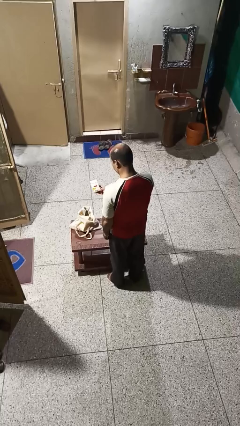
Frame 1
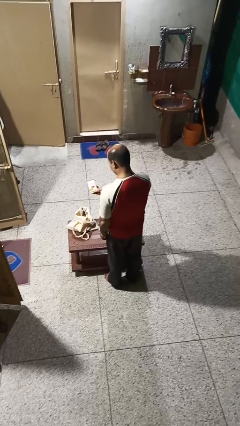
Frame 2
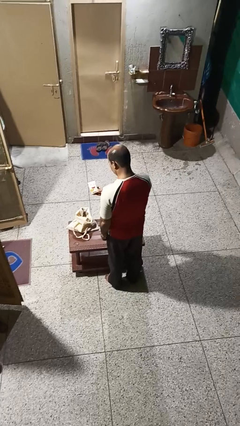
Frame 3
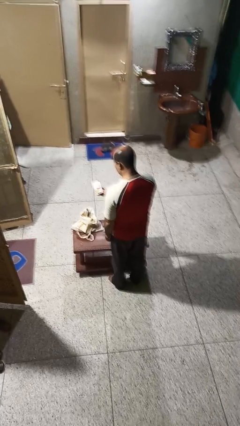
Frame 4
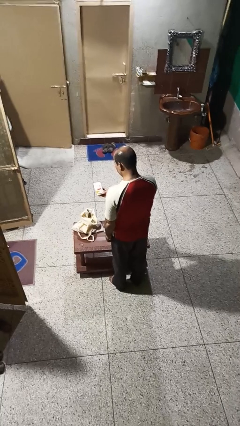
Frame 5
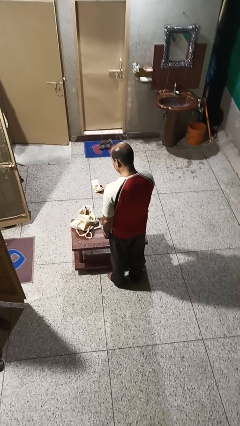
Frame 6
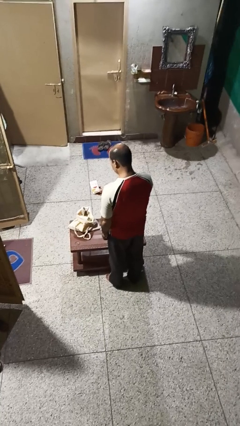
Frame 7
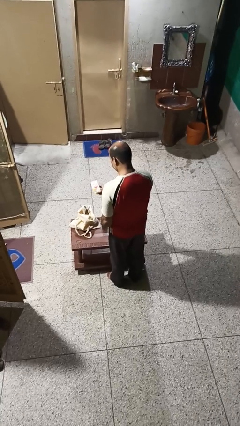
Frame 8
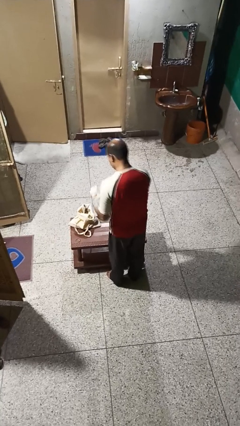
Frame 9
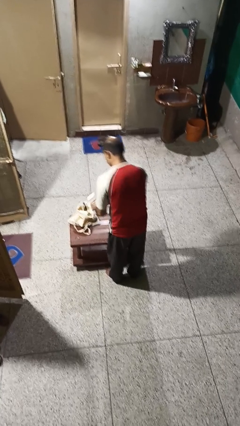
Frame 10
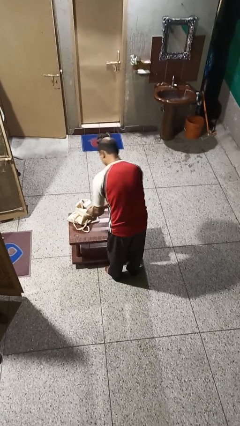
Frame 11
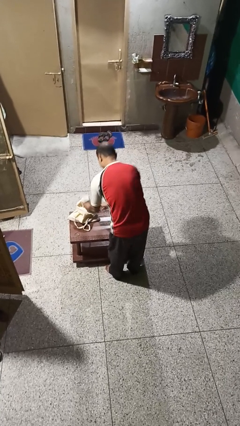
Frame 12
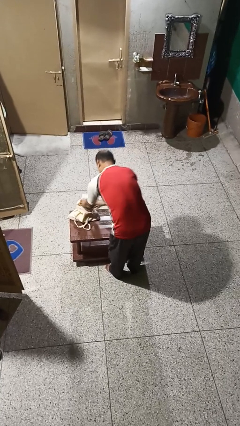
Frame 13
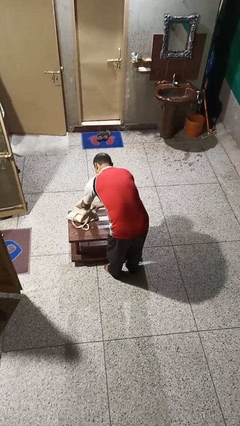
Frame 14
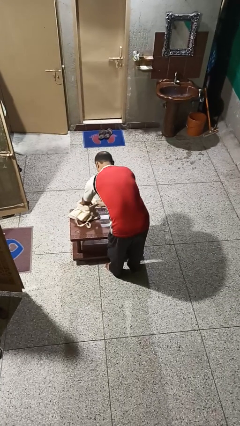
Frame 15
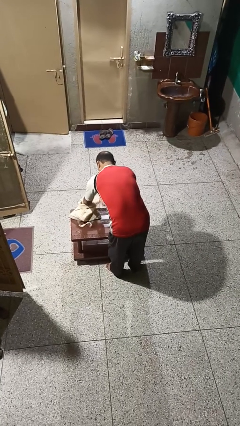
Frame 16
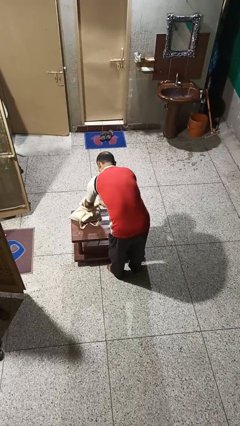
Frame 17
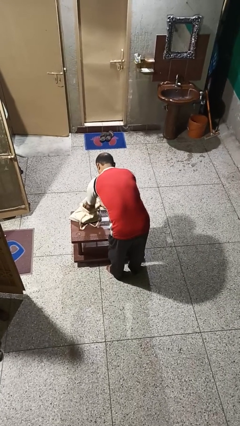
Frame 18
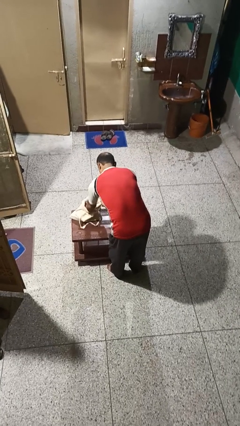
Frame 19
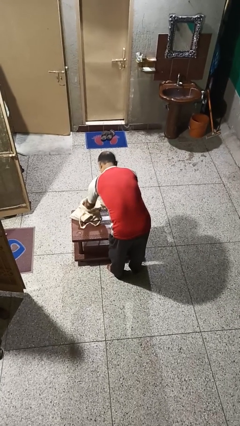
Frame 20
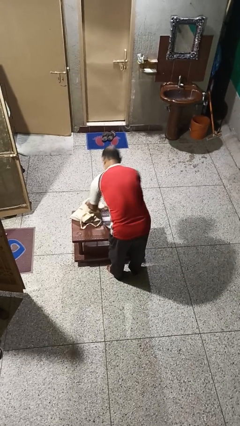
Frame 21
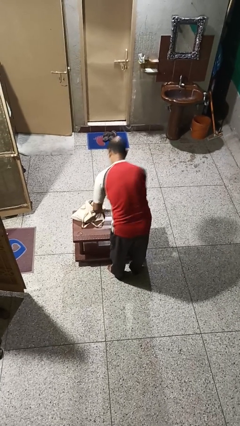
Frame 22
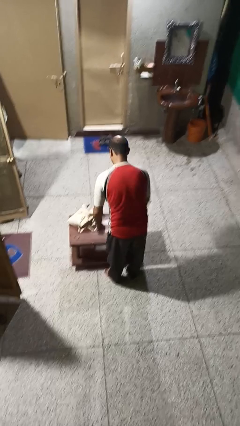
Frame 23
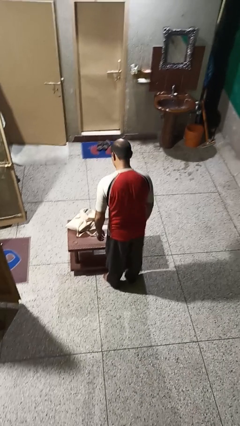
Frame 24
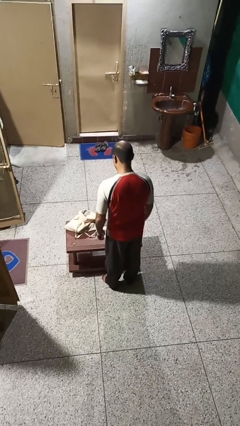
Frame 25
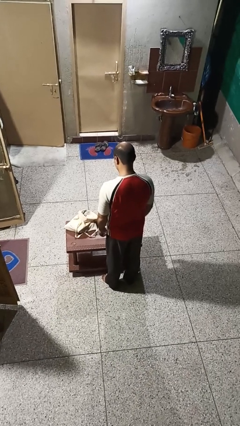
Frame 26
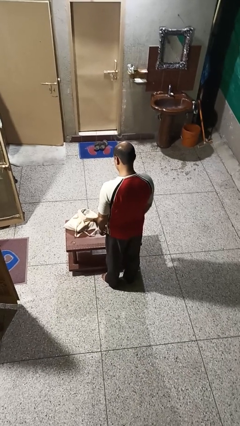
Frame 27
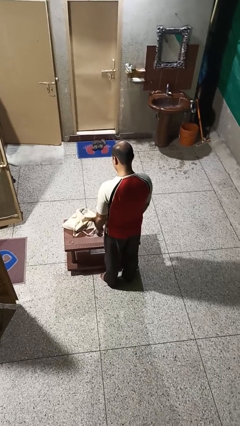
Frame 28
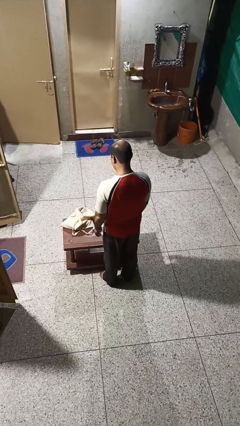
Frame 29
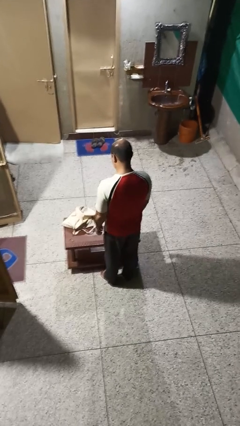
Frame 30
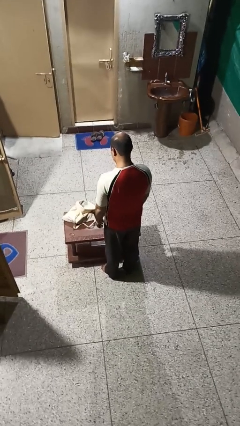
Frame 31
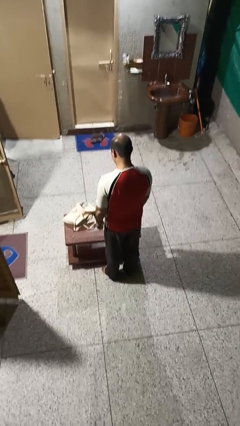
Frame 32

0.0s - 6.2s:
person puts object into bag

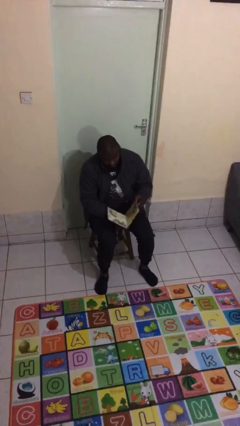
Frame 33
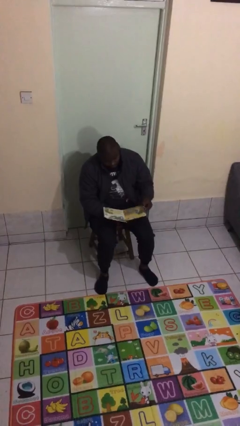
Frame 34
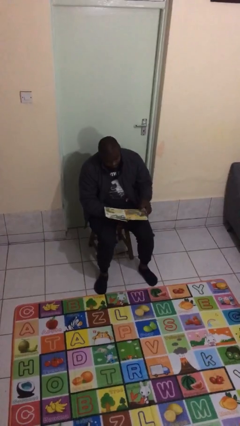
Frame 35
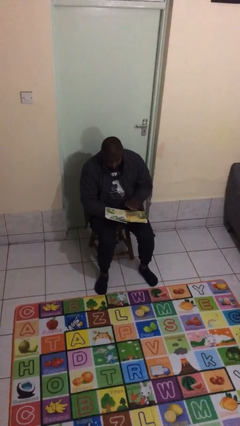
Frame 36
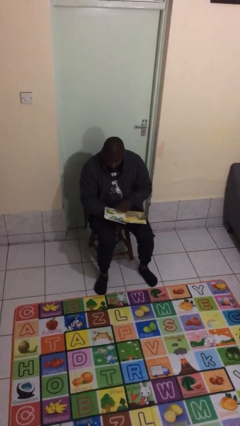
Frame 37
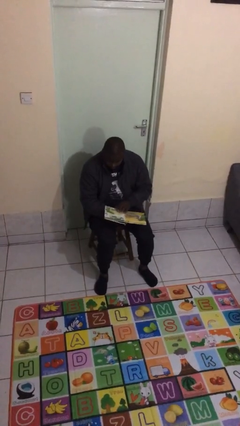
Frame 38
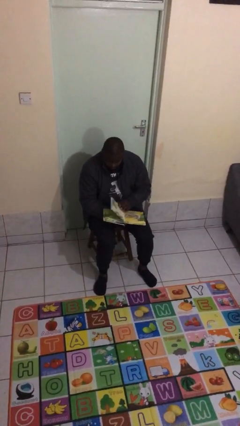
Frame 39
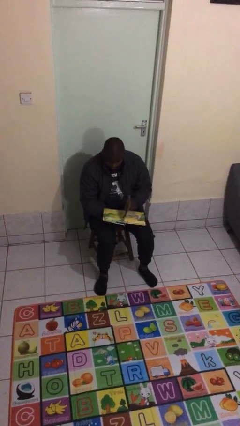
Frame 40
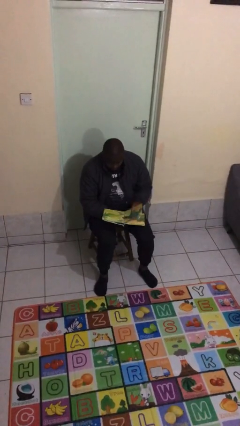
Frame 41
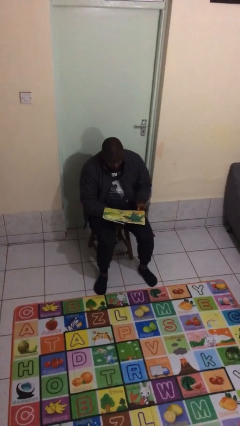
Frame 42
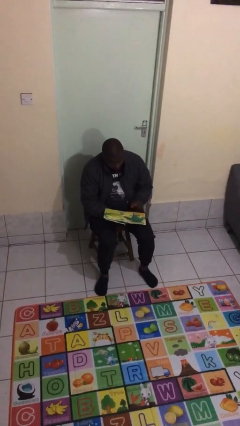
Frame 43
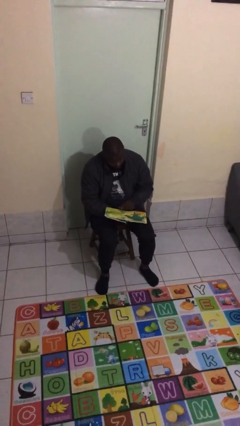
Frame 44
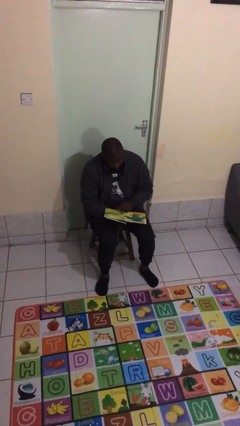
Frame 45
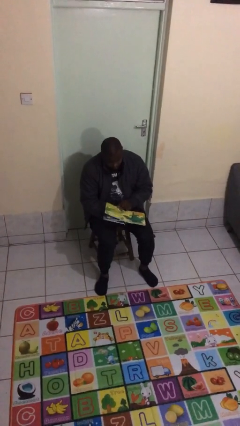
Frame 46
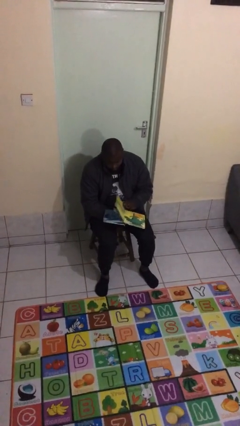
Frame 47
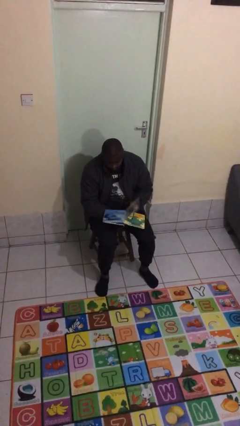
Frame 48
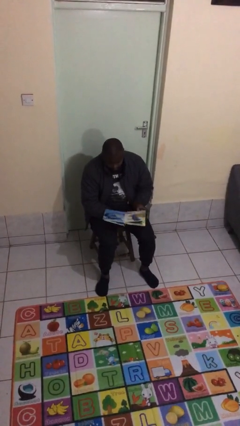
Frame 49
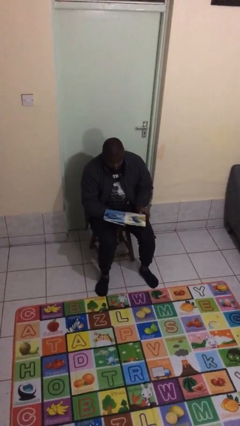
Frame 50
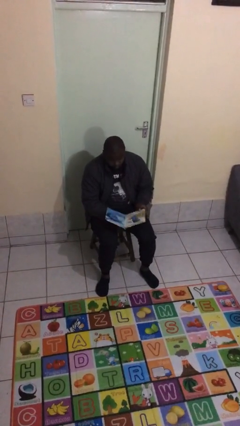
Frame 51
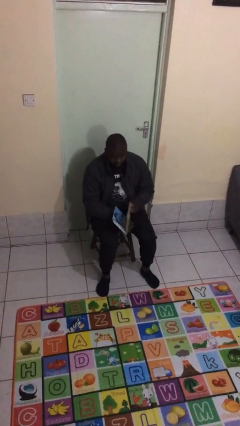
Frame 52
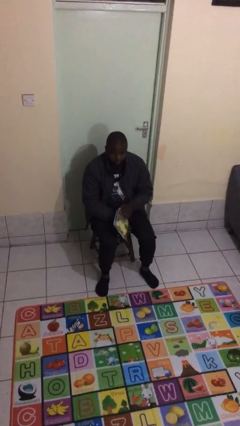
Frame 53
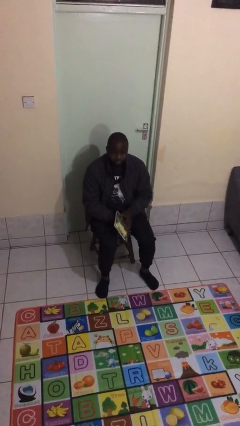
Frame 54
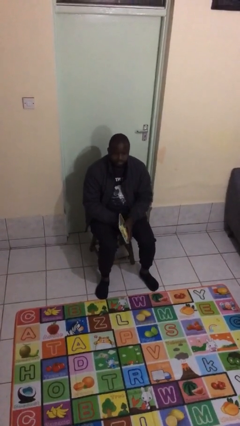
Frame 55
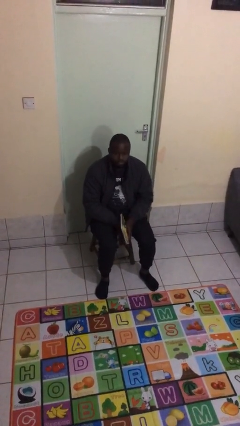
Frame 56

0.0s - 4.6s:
person reads book

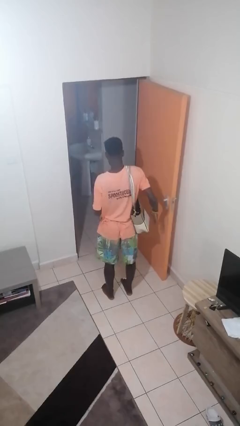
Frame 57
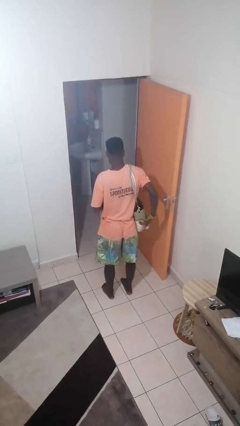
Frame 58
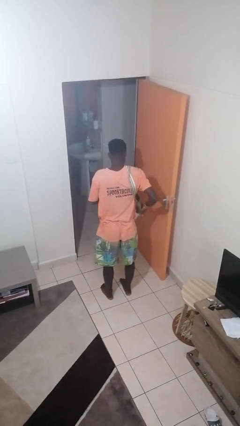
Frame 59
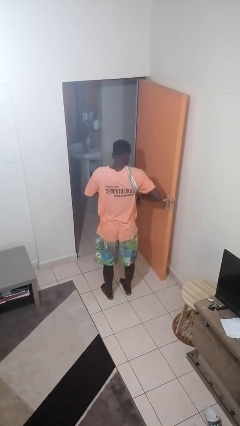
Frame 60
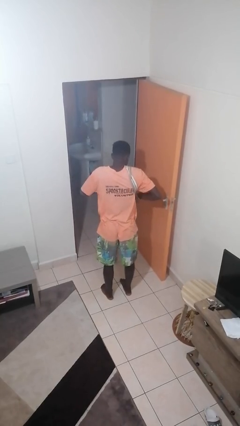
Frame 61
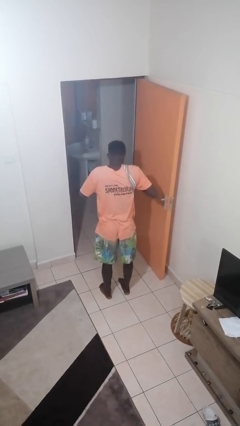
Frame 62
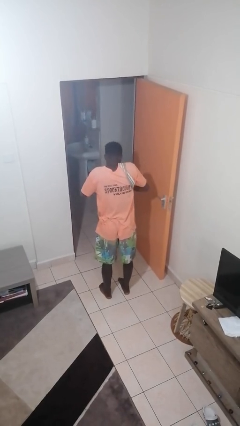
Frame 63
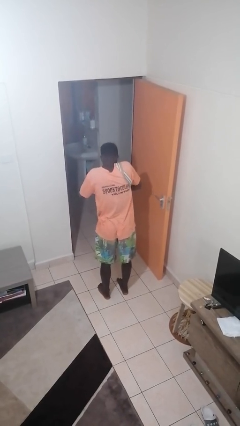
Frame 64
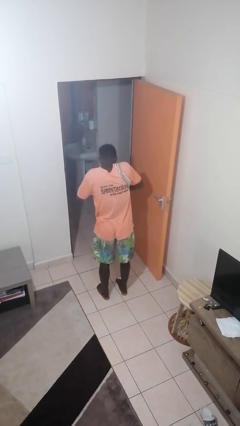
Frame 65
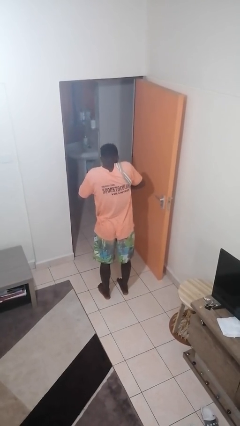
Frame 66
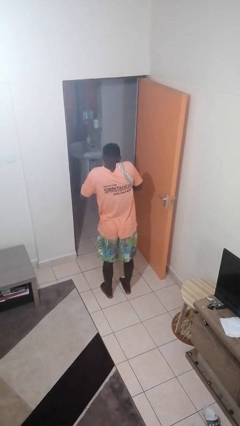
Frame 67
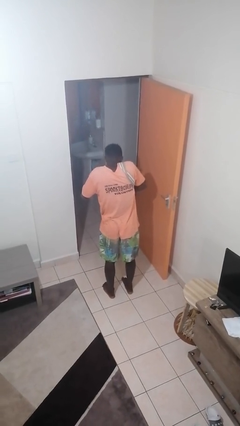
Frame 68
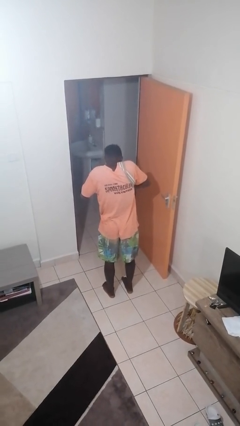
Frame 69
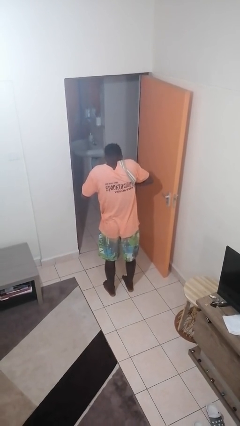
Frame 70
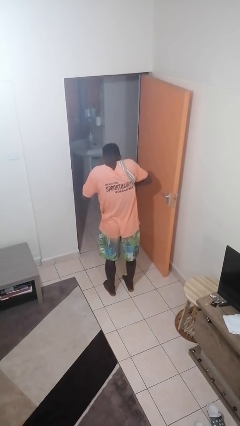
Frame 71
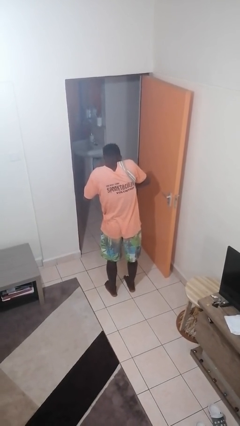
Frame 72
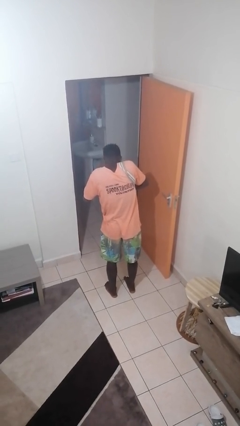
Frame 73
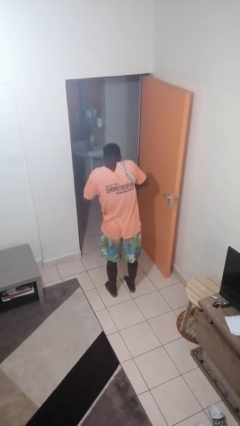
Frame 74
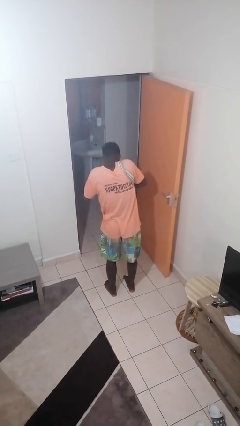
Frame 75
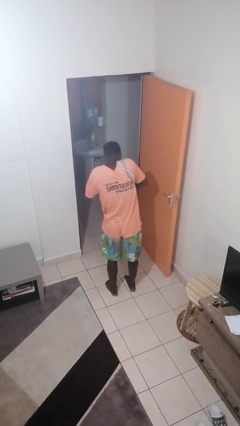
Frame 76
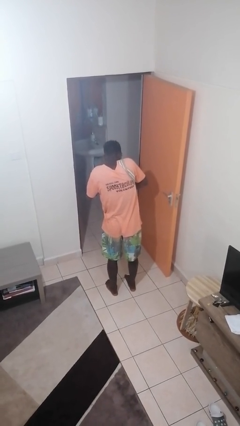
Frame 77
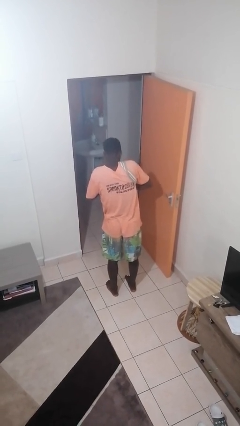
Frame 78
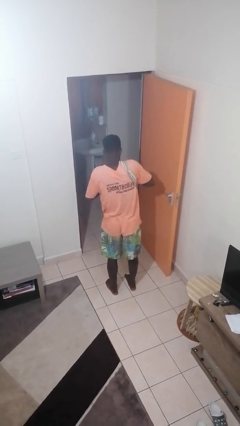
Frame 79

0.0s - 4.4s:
person searches in purse

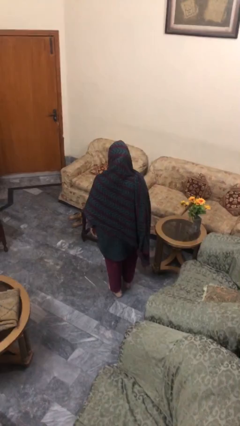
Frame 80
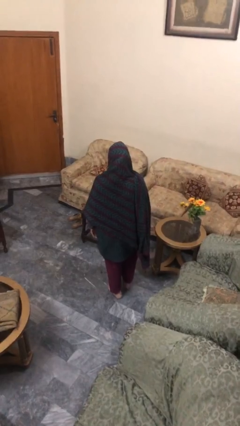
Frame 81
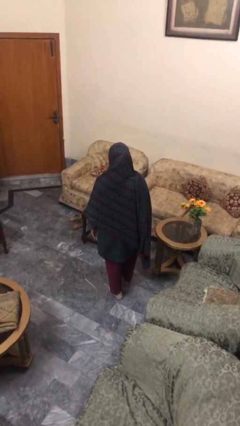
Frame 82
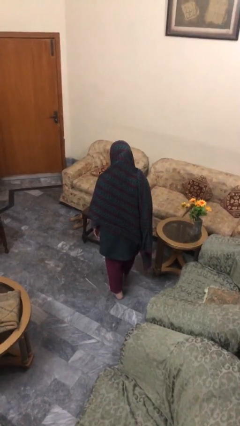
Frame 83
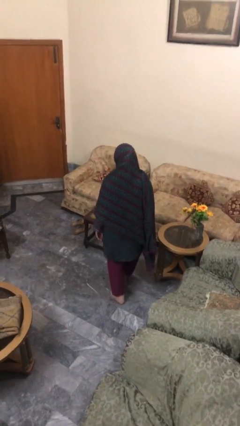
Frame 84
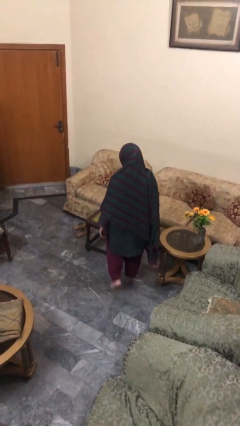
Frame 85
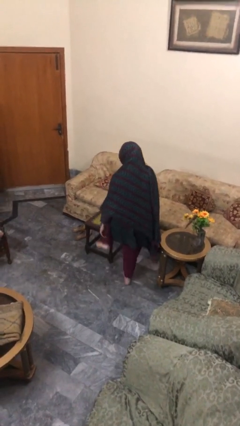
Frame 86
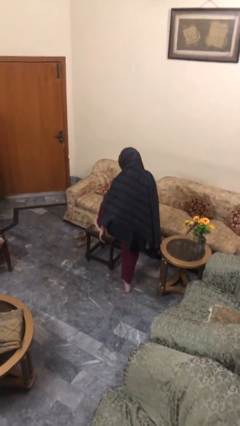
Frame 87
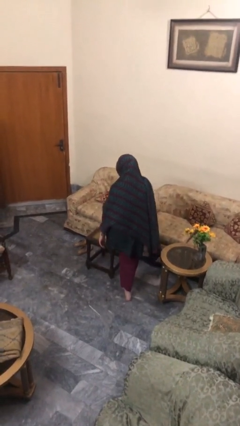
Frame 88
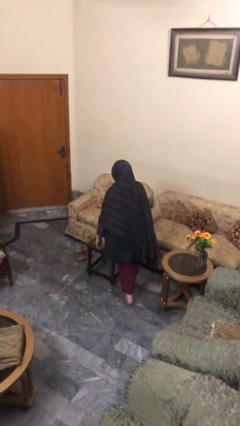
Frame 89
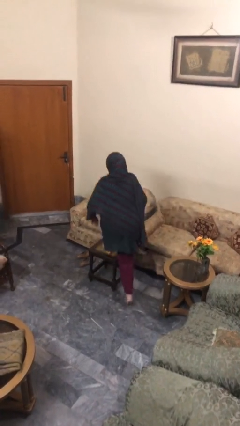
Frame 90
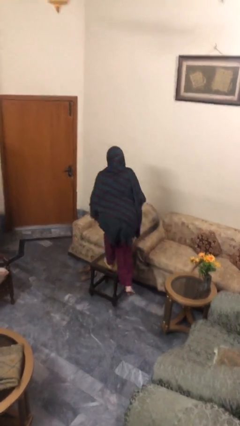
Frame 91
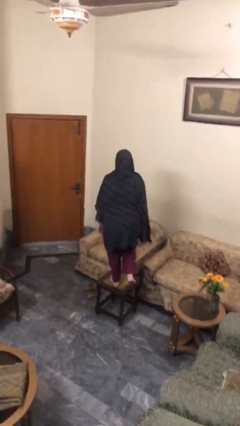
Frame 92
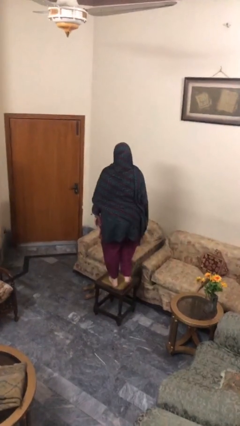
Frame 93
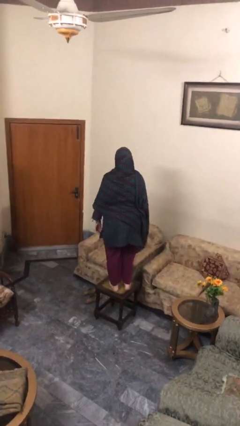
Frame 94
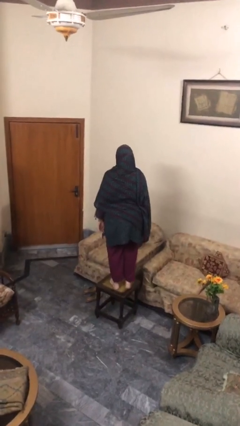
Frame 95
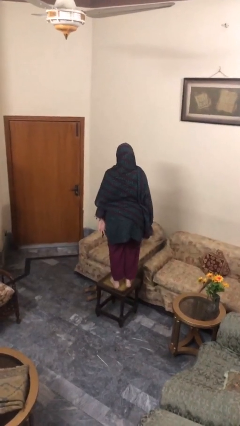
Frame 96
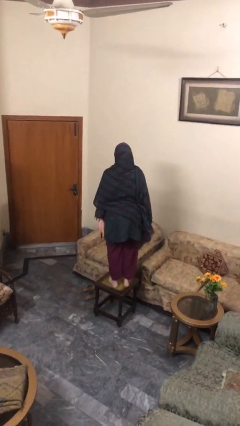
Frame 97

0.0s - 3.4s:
person climbs on table
